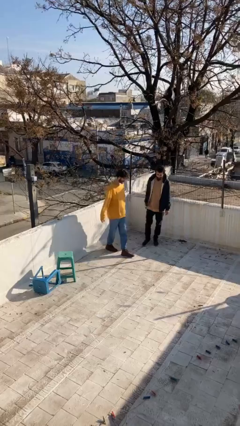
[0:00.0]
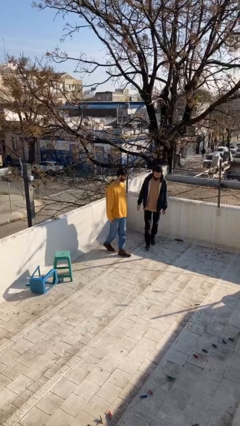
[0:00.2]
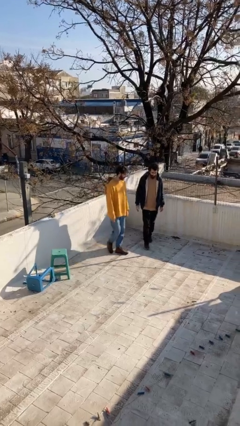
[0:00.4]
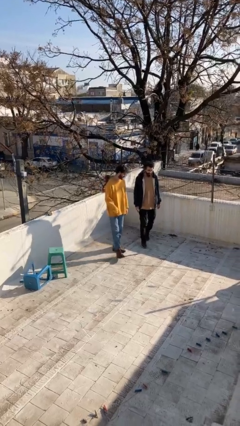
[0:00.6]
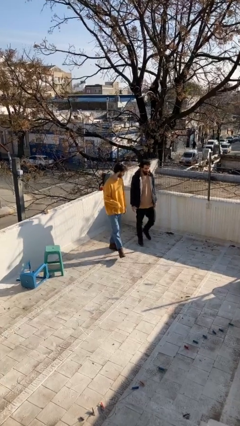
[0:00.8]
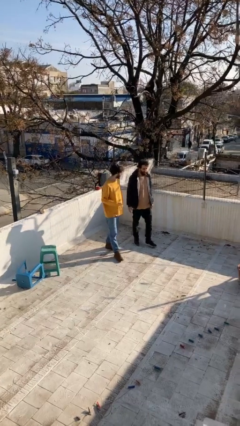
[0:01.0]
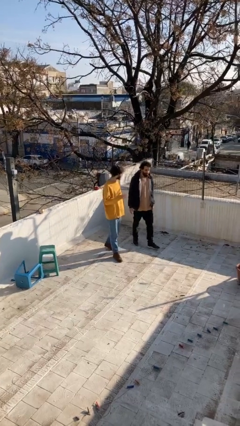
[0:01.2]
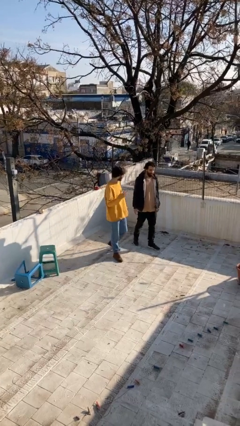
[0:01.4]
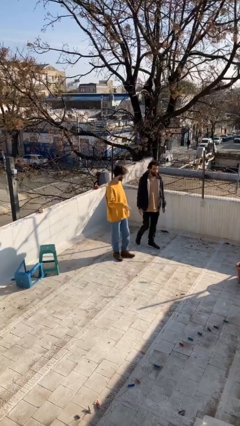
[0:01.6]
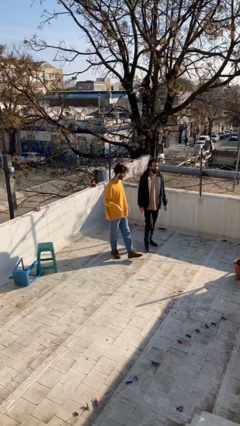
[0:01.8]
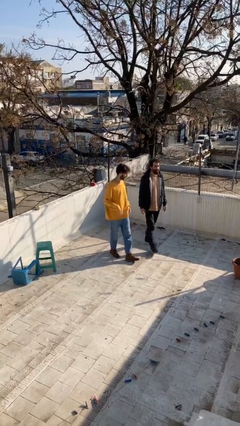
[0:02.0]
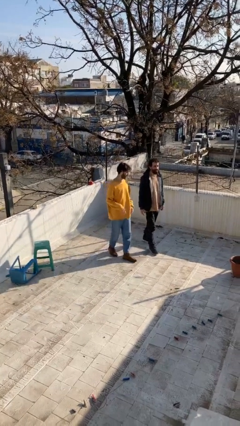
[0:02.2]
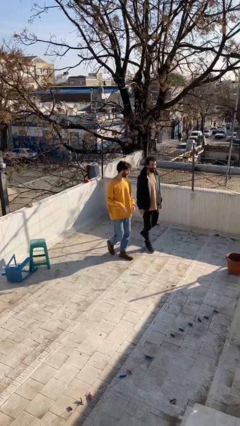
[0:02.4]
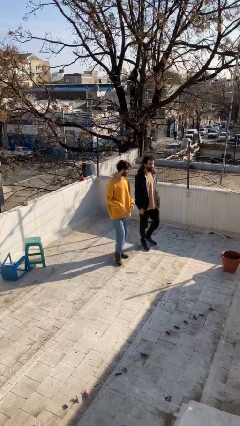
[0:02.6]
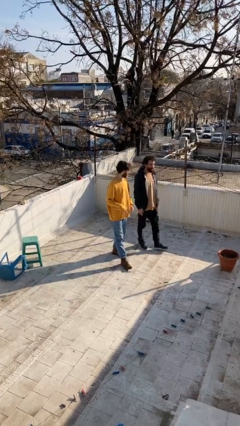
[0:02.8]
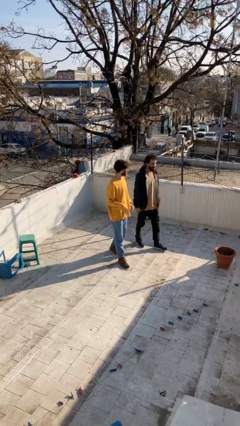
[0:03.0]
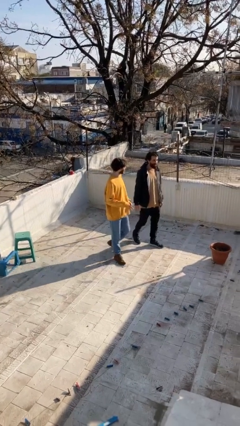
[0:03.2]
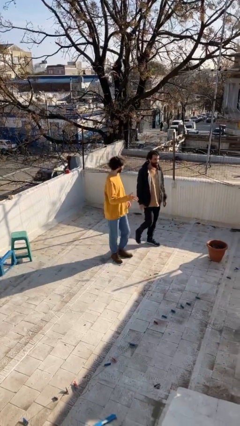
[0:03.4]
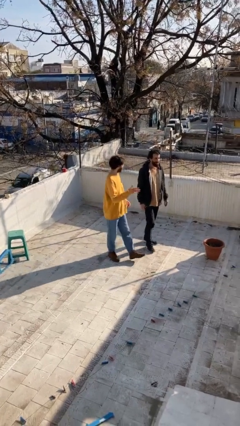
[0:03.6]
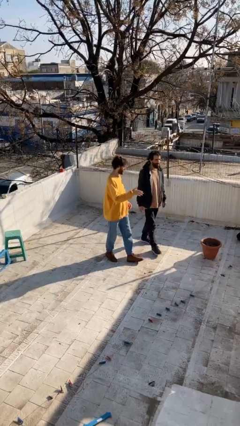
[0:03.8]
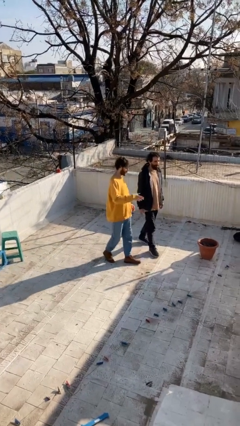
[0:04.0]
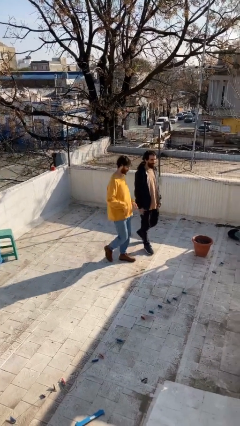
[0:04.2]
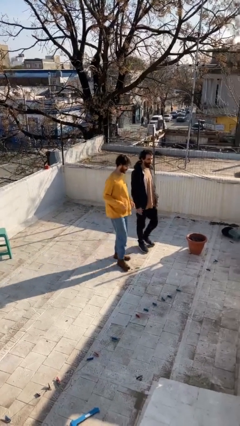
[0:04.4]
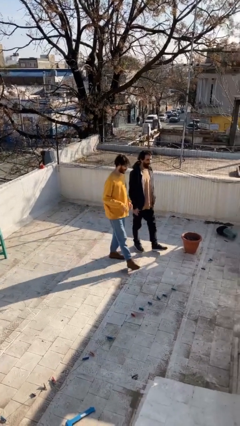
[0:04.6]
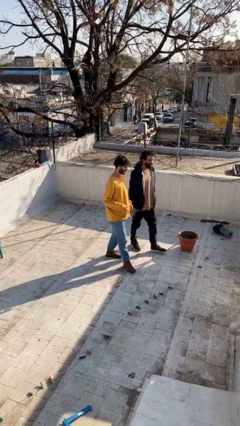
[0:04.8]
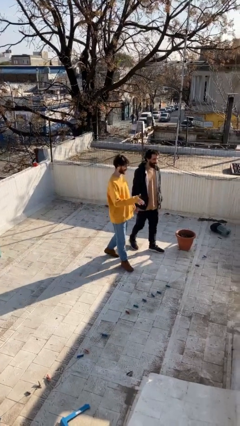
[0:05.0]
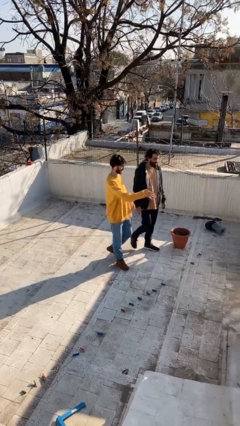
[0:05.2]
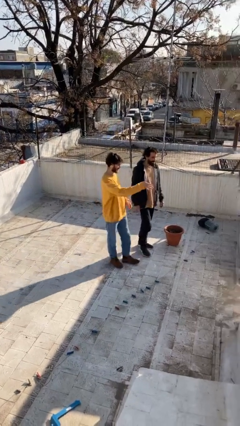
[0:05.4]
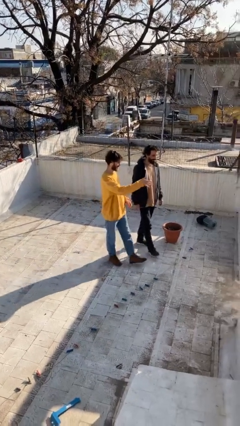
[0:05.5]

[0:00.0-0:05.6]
person talks to person

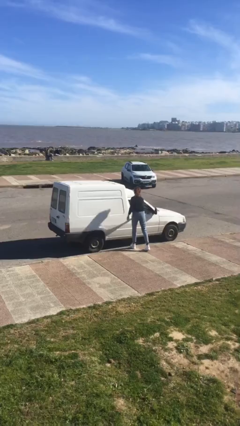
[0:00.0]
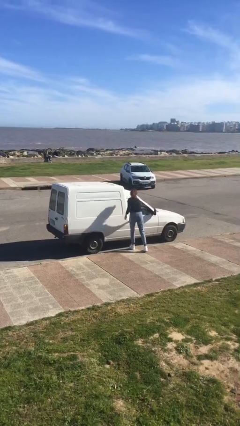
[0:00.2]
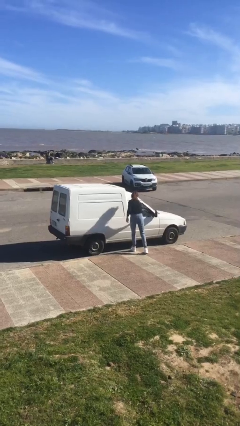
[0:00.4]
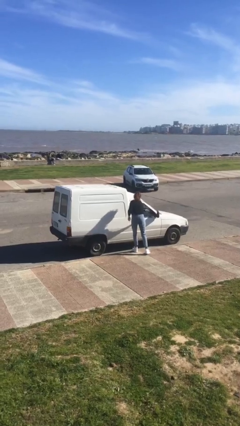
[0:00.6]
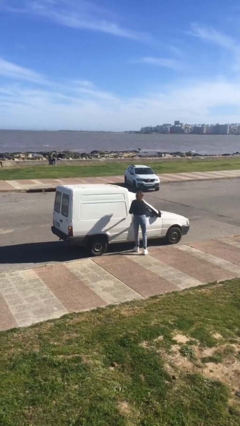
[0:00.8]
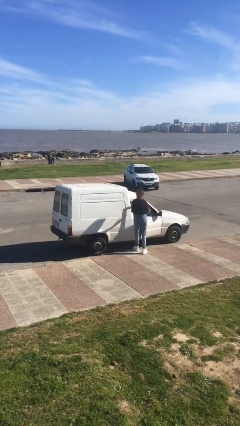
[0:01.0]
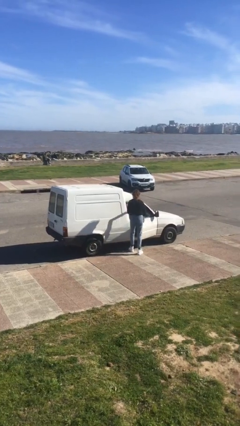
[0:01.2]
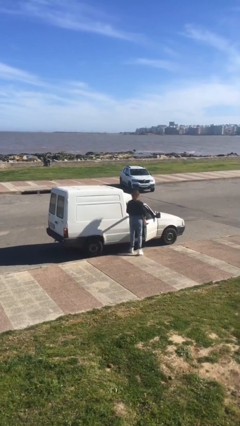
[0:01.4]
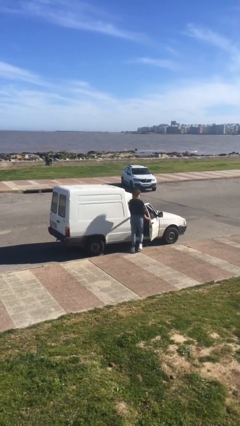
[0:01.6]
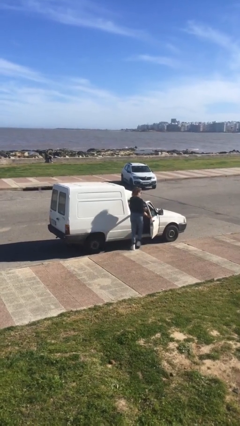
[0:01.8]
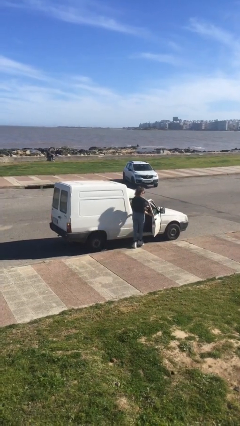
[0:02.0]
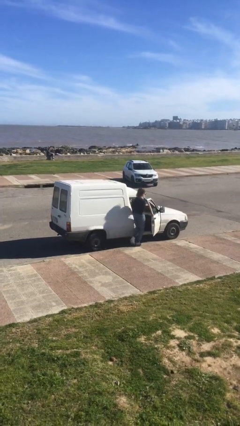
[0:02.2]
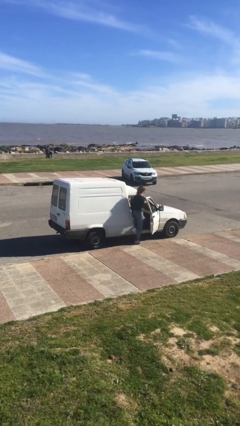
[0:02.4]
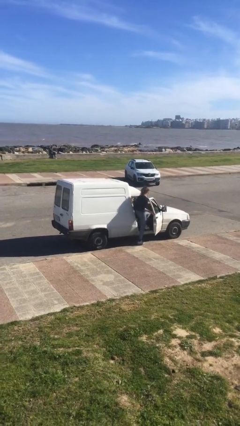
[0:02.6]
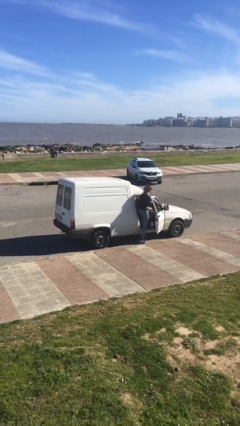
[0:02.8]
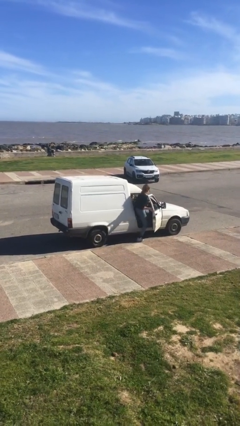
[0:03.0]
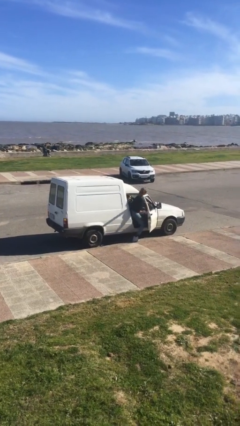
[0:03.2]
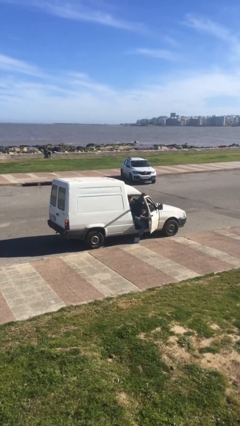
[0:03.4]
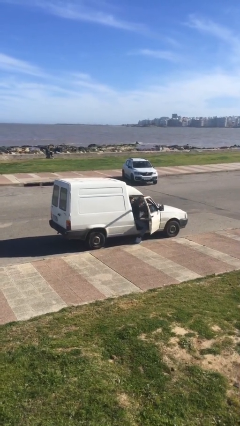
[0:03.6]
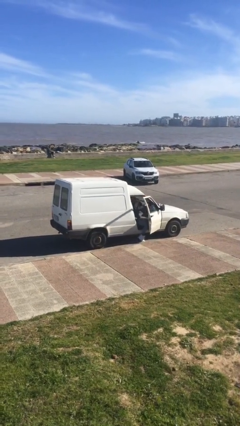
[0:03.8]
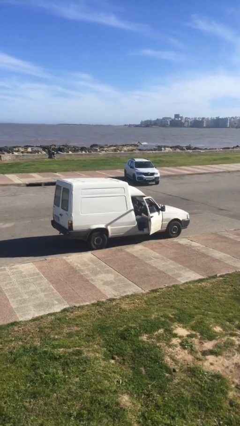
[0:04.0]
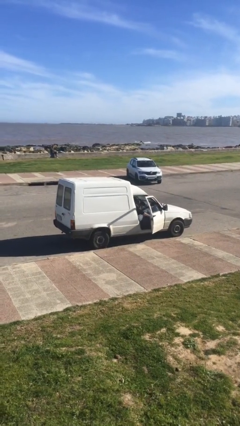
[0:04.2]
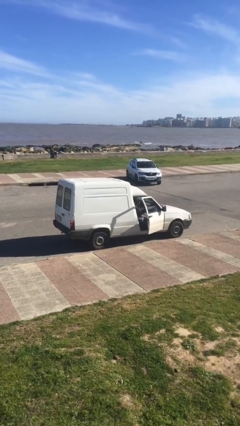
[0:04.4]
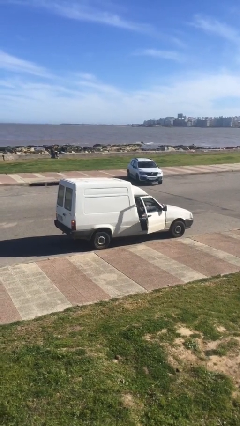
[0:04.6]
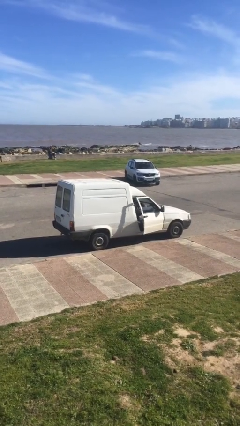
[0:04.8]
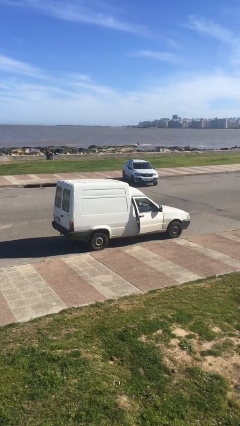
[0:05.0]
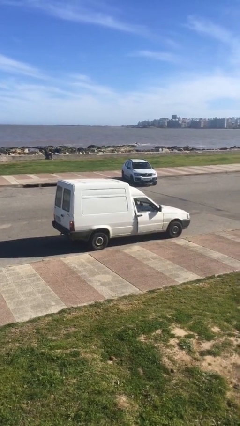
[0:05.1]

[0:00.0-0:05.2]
car picks up person

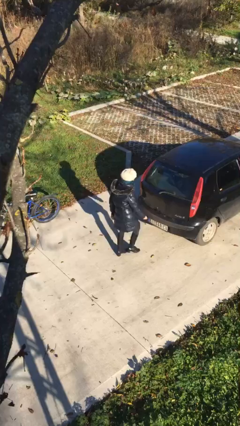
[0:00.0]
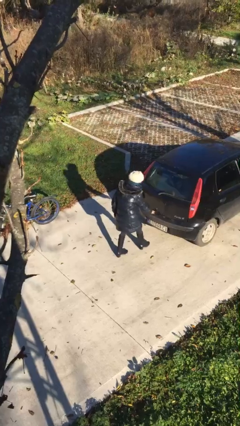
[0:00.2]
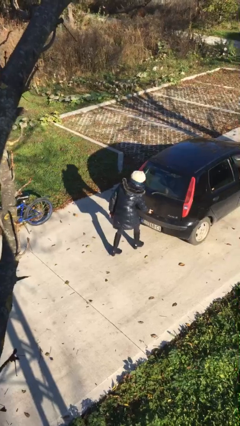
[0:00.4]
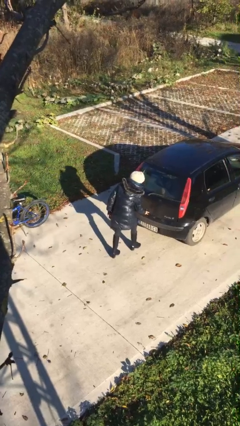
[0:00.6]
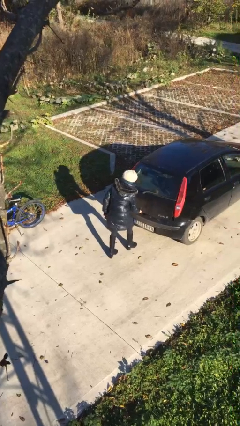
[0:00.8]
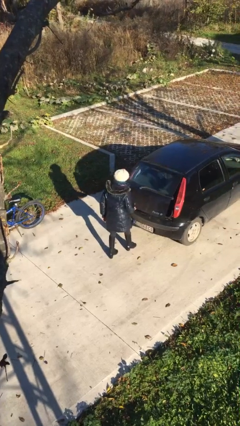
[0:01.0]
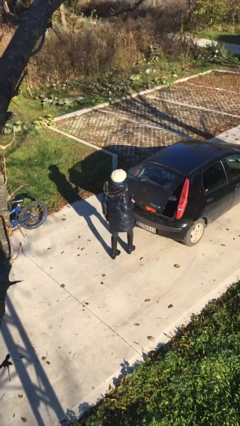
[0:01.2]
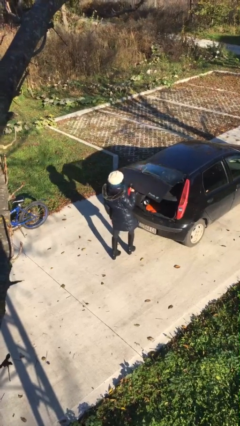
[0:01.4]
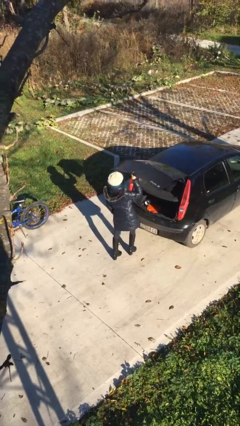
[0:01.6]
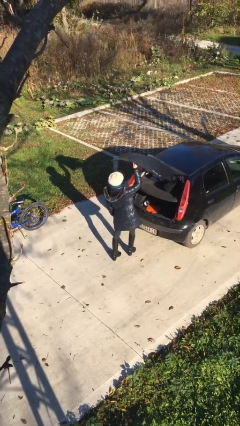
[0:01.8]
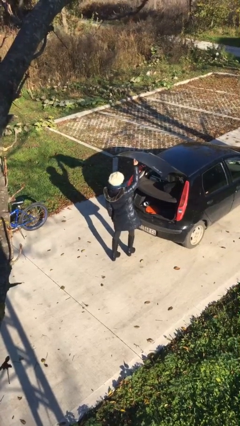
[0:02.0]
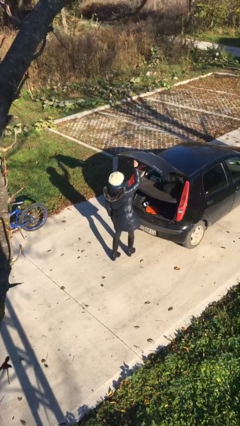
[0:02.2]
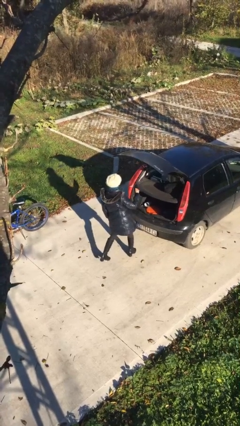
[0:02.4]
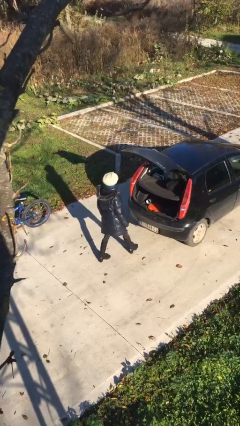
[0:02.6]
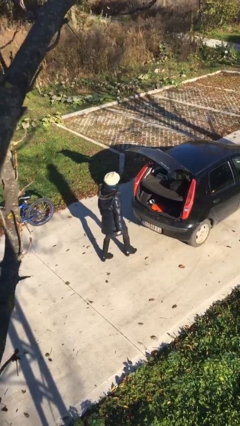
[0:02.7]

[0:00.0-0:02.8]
person opens car trunk

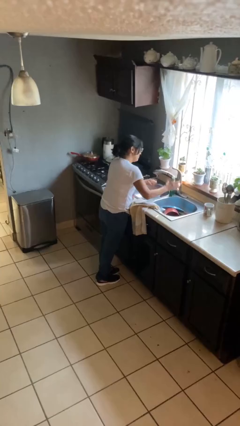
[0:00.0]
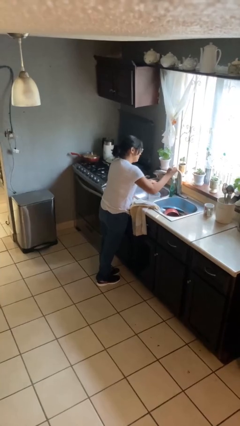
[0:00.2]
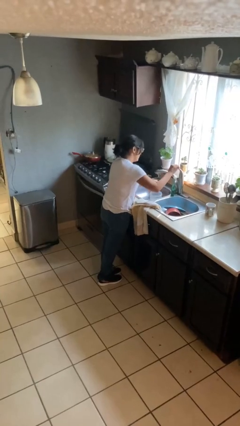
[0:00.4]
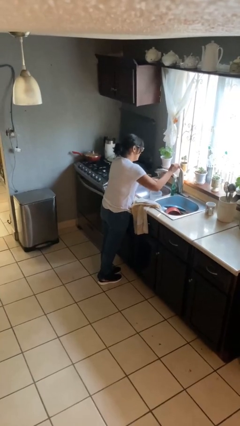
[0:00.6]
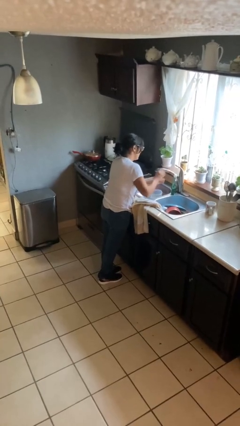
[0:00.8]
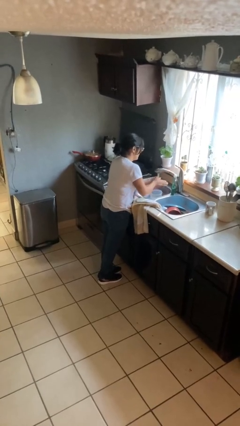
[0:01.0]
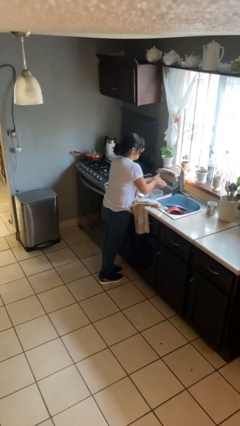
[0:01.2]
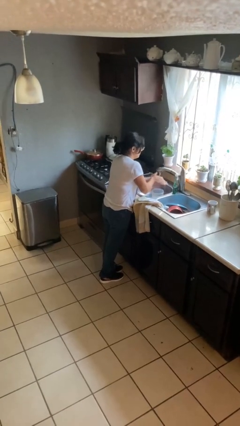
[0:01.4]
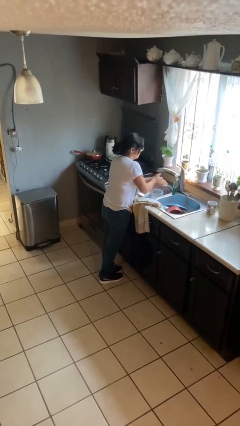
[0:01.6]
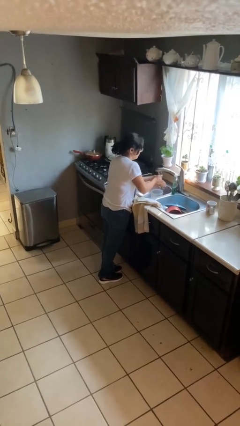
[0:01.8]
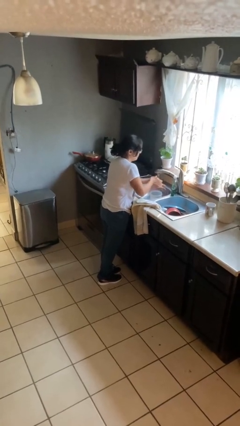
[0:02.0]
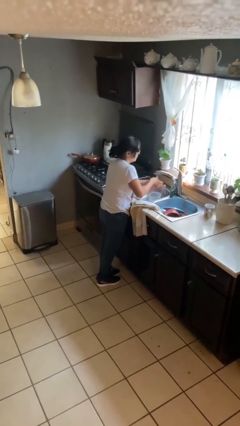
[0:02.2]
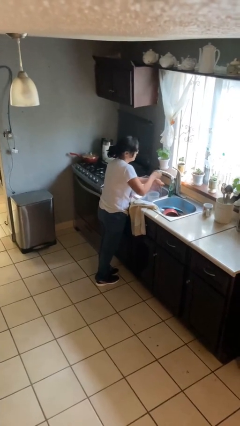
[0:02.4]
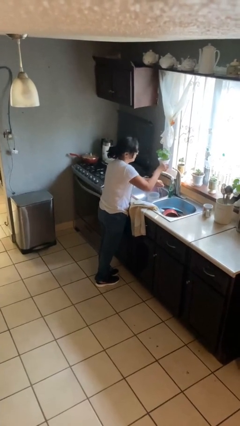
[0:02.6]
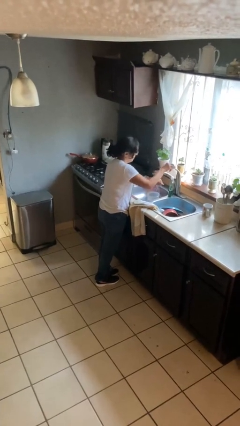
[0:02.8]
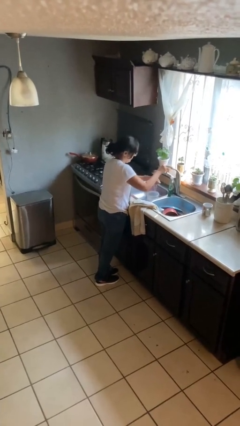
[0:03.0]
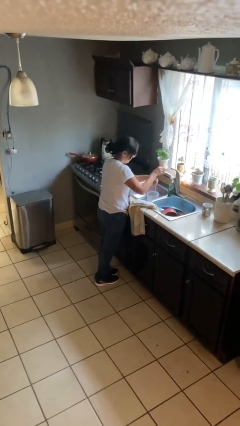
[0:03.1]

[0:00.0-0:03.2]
person washes hands

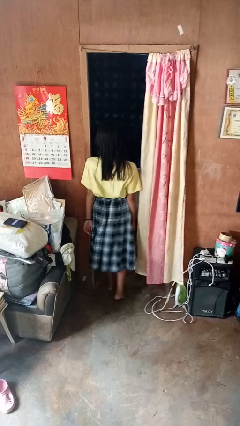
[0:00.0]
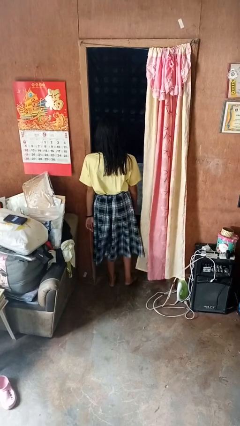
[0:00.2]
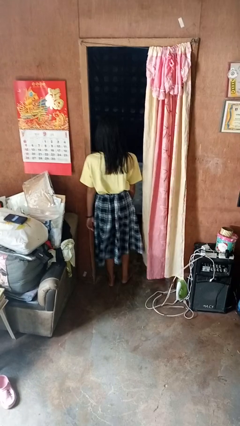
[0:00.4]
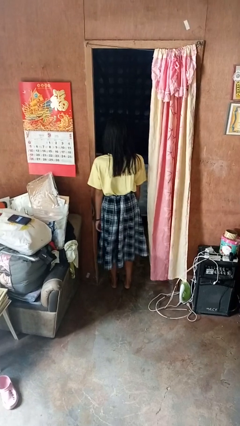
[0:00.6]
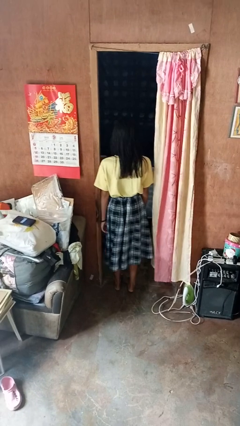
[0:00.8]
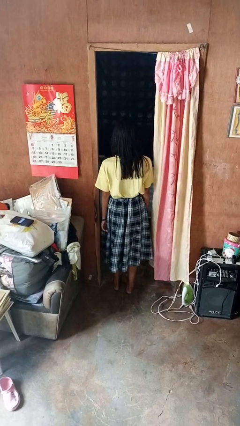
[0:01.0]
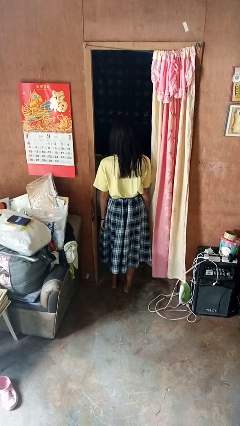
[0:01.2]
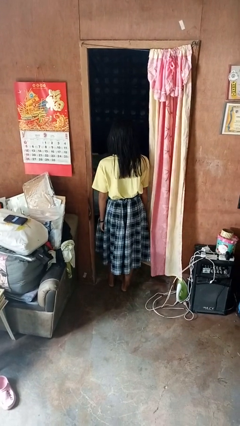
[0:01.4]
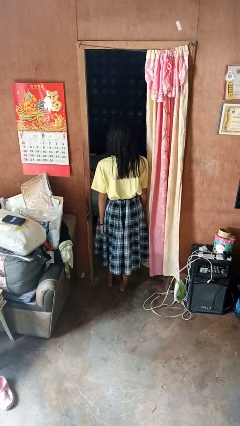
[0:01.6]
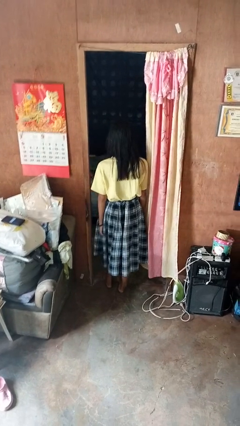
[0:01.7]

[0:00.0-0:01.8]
person bumps into wall
